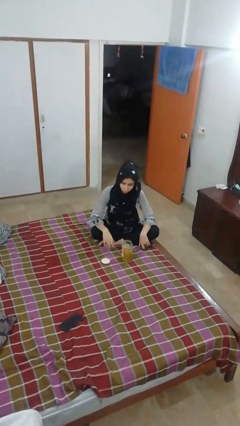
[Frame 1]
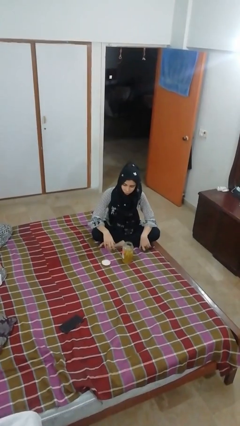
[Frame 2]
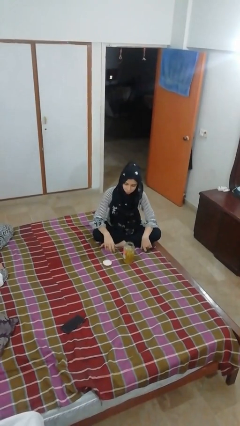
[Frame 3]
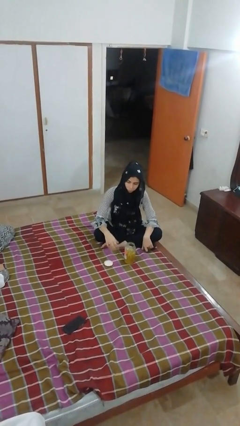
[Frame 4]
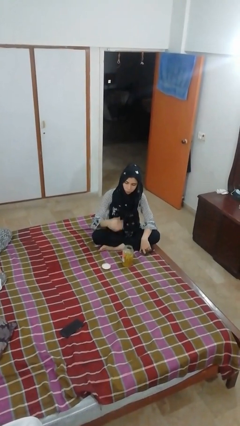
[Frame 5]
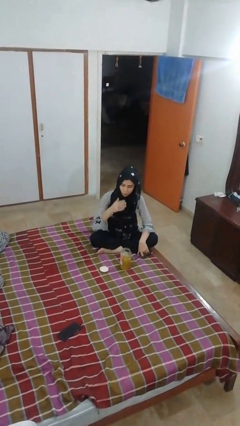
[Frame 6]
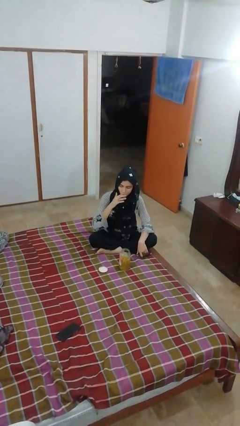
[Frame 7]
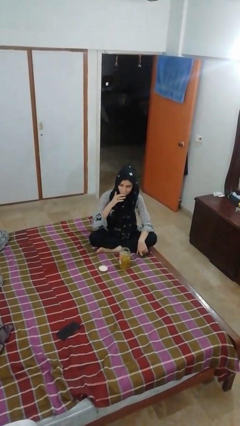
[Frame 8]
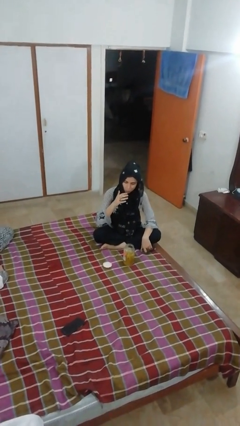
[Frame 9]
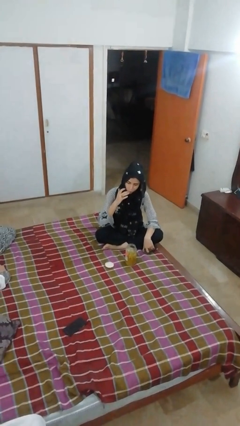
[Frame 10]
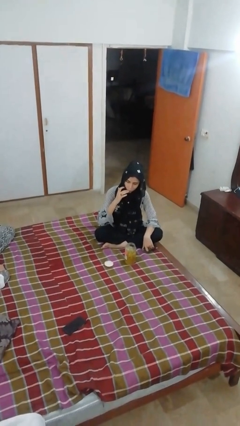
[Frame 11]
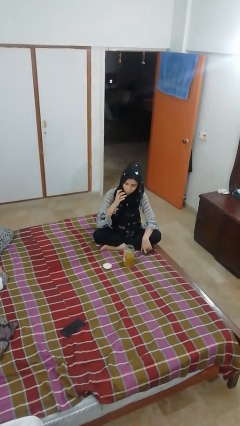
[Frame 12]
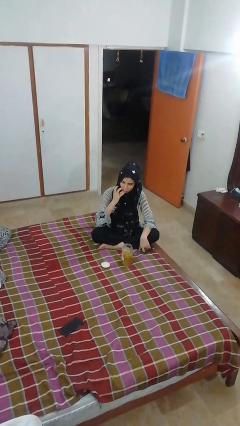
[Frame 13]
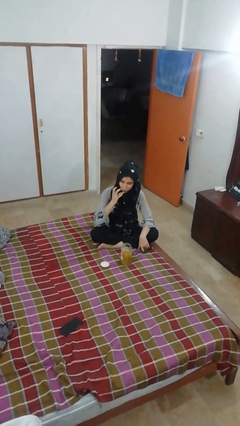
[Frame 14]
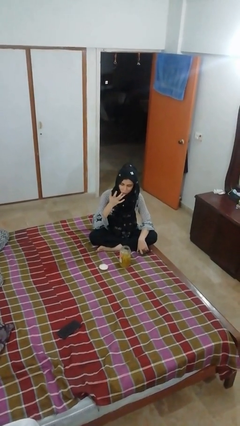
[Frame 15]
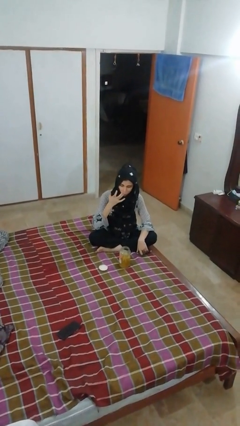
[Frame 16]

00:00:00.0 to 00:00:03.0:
person licks fingers

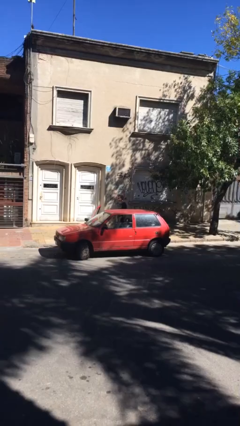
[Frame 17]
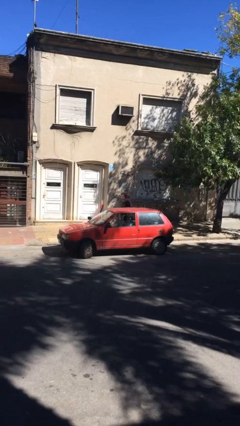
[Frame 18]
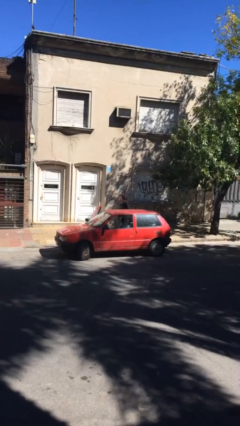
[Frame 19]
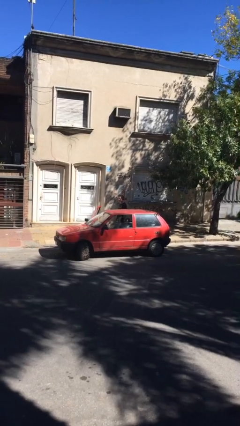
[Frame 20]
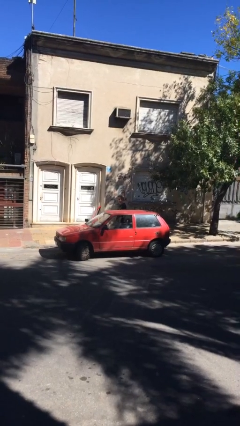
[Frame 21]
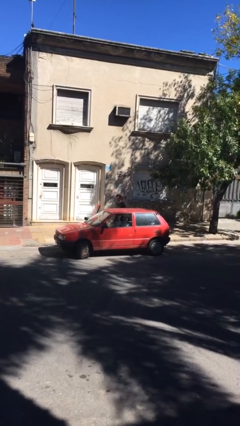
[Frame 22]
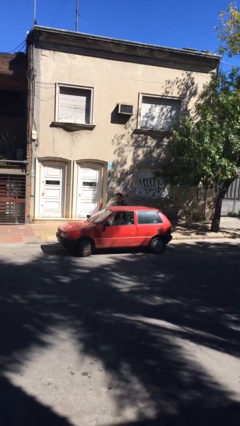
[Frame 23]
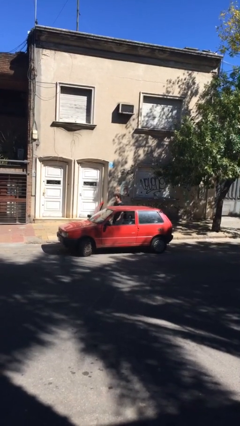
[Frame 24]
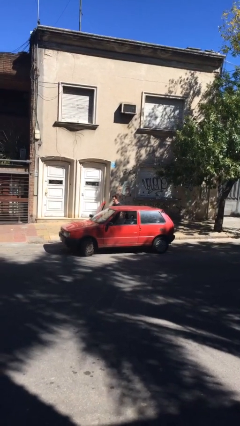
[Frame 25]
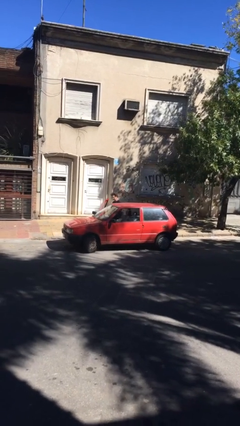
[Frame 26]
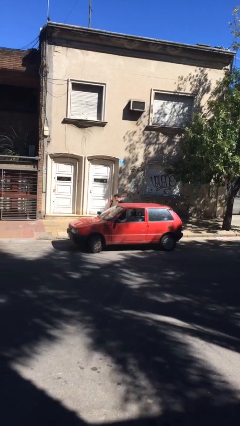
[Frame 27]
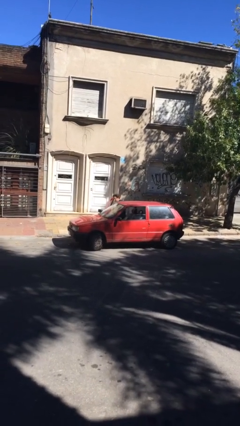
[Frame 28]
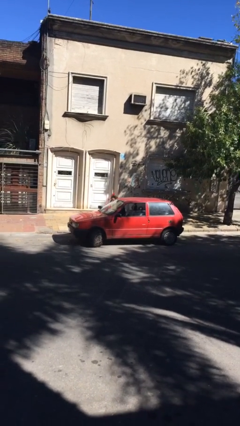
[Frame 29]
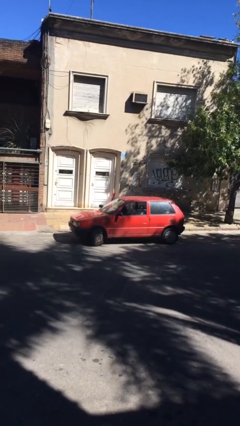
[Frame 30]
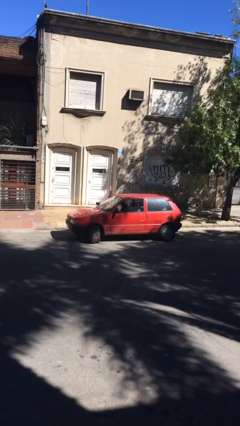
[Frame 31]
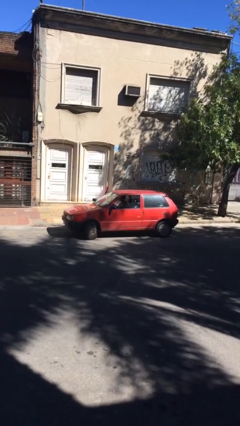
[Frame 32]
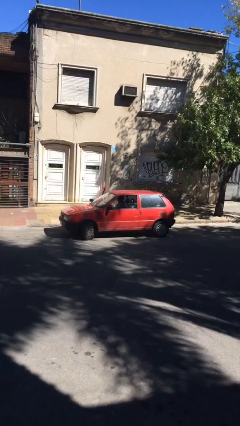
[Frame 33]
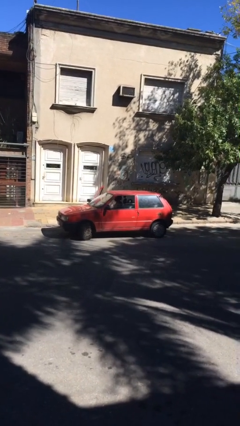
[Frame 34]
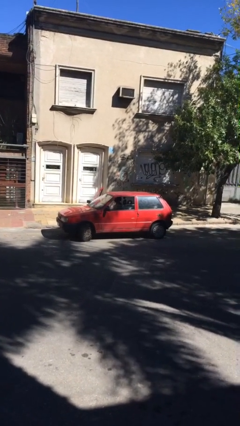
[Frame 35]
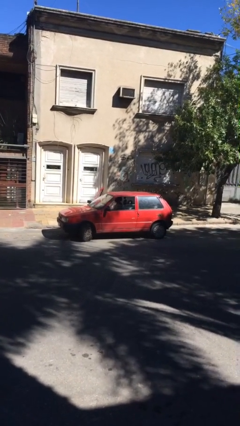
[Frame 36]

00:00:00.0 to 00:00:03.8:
person enters car

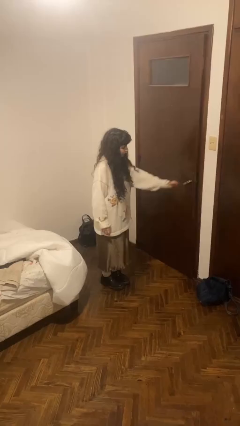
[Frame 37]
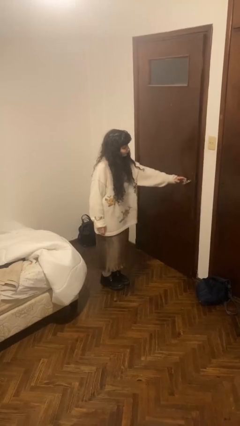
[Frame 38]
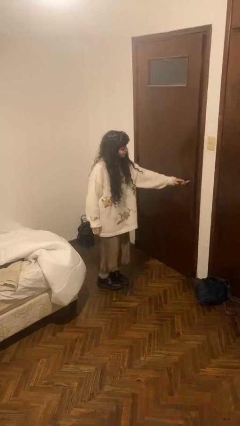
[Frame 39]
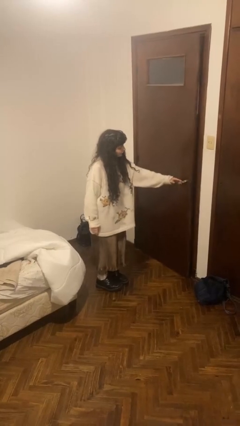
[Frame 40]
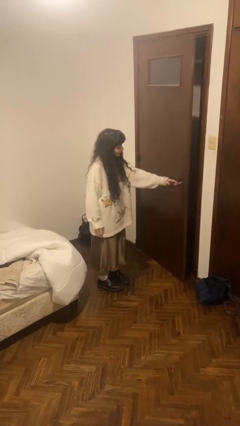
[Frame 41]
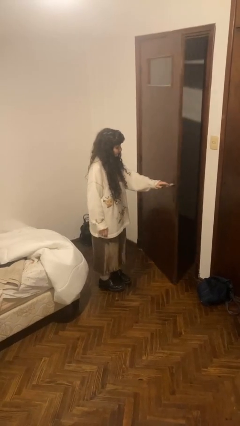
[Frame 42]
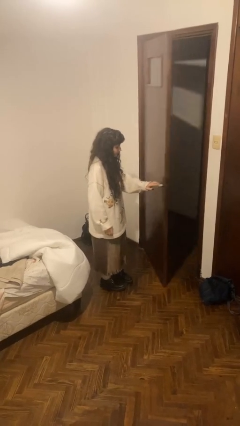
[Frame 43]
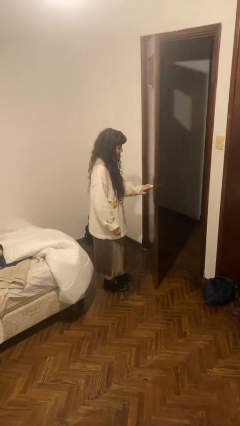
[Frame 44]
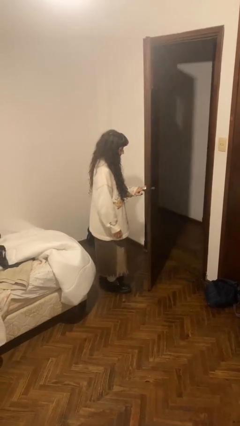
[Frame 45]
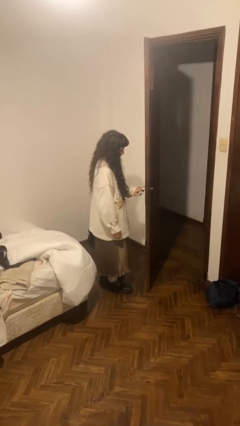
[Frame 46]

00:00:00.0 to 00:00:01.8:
person opens facility door

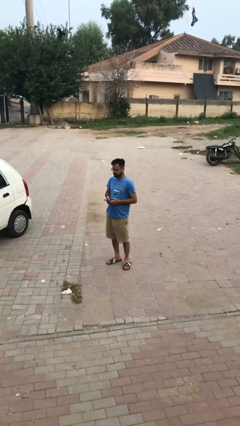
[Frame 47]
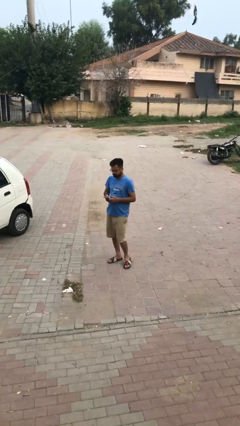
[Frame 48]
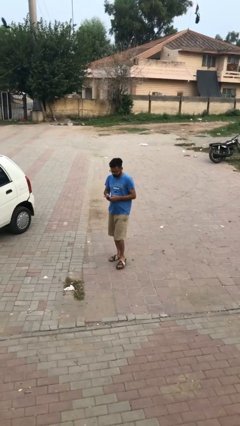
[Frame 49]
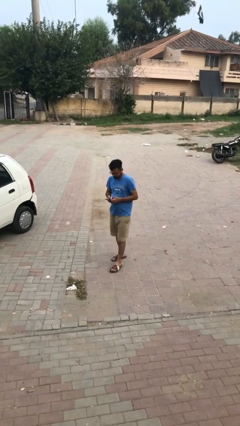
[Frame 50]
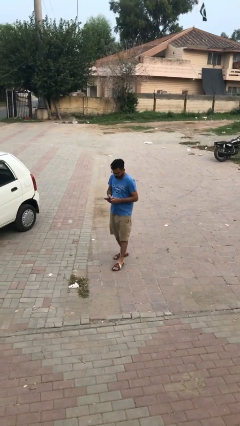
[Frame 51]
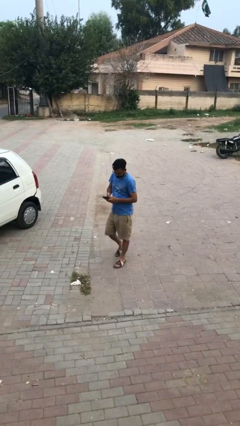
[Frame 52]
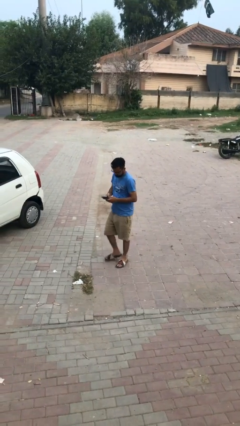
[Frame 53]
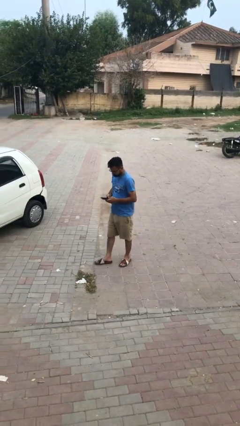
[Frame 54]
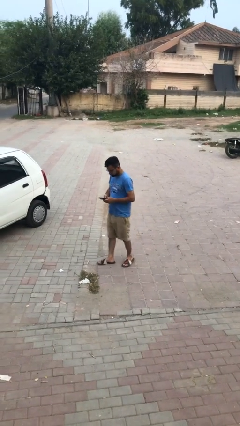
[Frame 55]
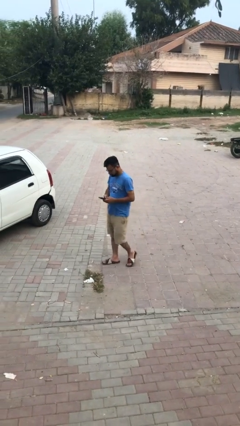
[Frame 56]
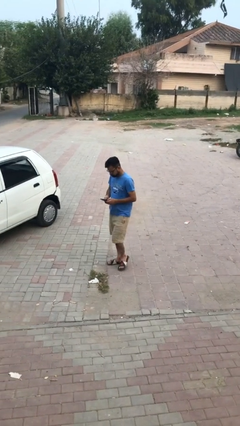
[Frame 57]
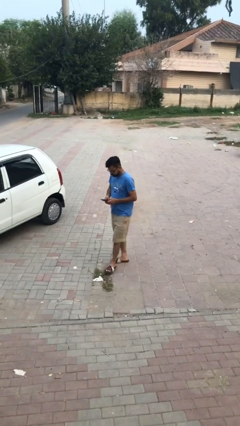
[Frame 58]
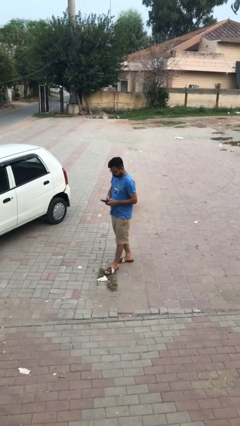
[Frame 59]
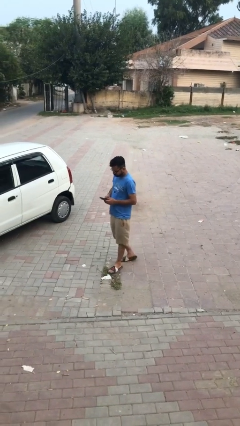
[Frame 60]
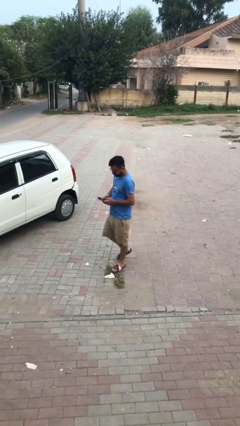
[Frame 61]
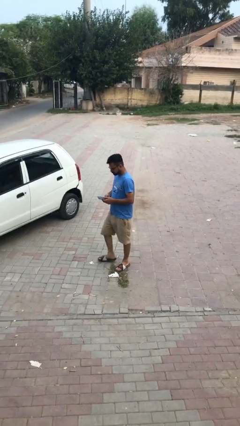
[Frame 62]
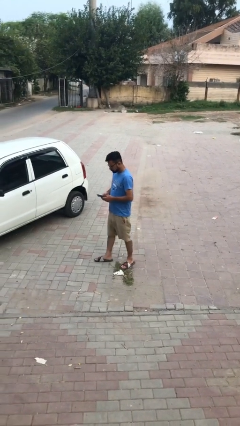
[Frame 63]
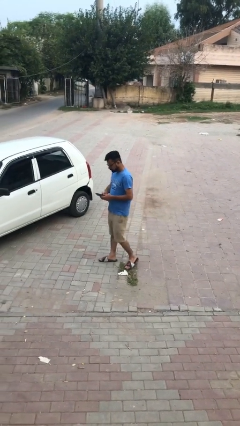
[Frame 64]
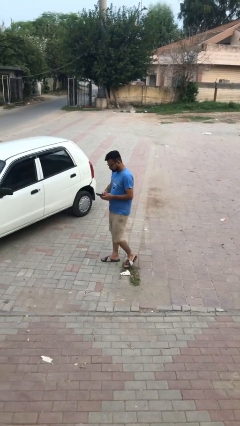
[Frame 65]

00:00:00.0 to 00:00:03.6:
person texts on phone

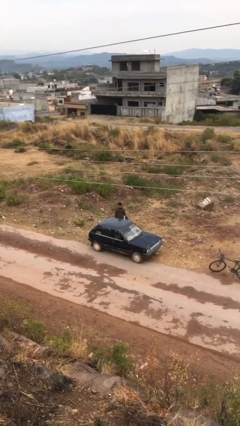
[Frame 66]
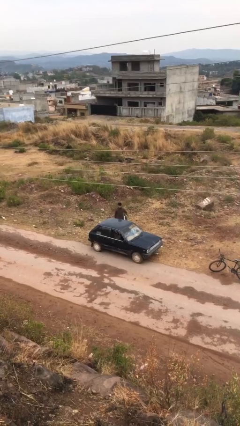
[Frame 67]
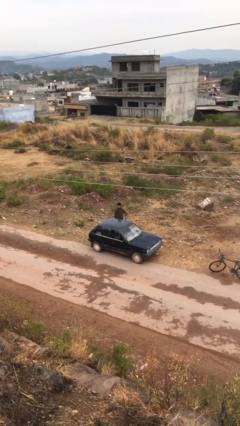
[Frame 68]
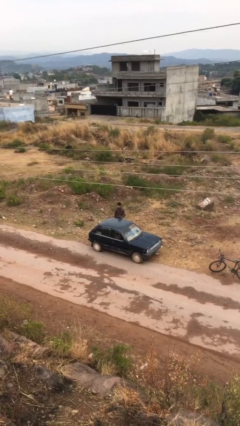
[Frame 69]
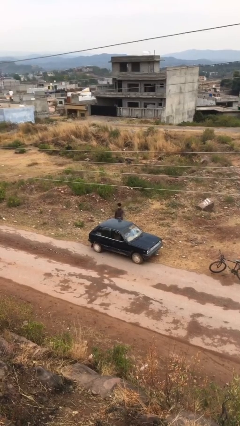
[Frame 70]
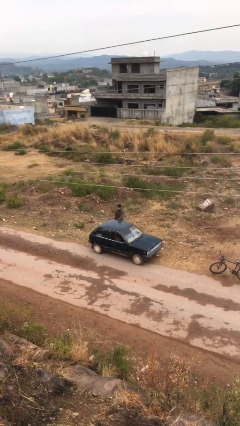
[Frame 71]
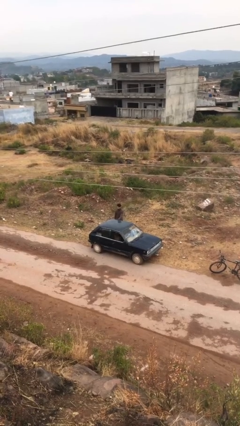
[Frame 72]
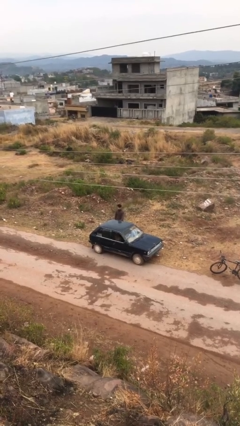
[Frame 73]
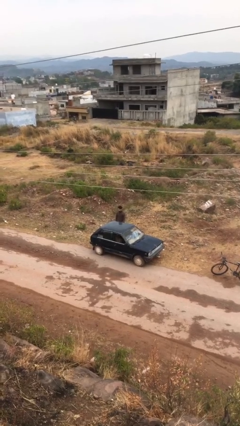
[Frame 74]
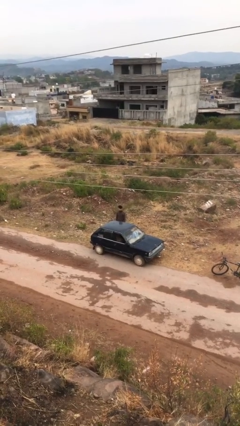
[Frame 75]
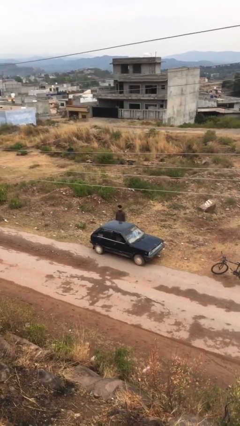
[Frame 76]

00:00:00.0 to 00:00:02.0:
person closes car door

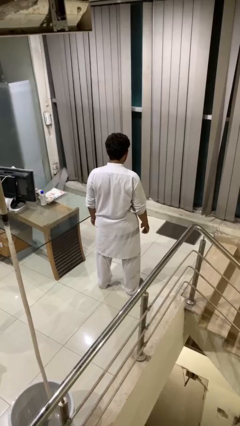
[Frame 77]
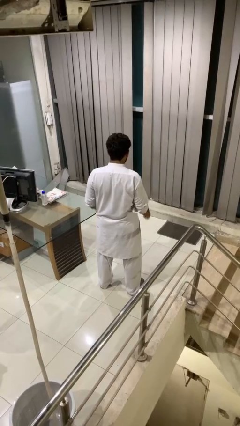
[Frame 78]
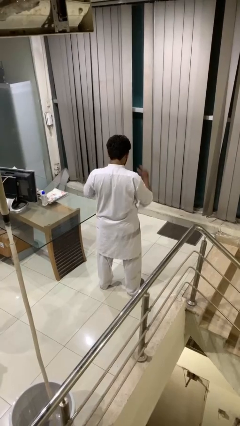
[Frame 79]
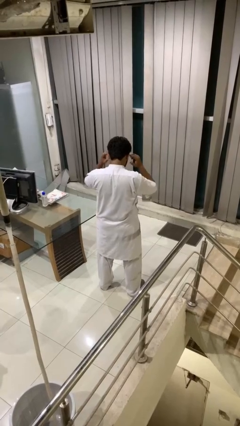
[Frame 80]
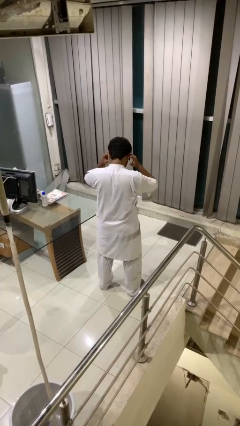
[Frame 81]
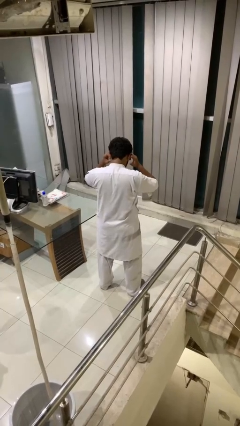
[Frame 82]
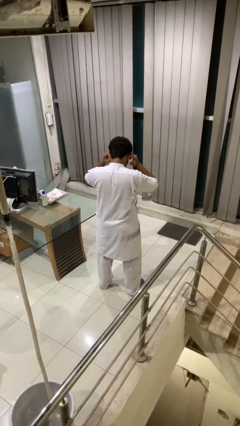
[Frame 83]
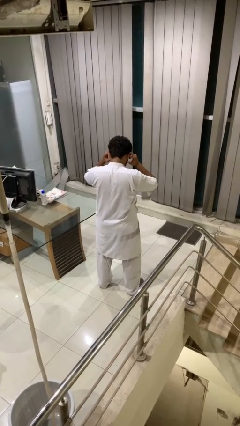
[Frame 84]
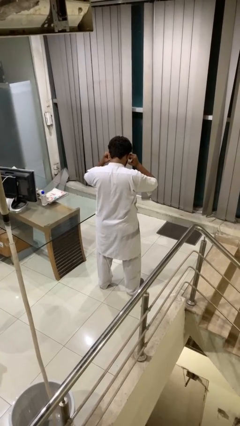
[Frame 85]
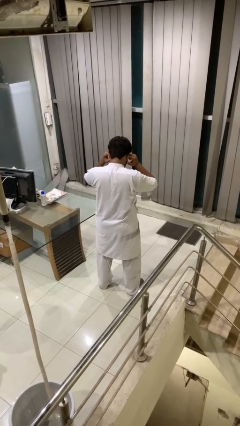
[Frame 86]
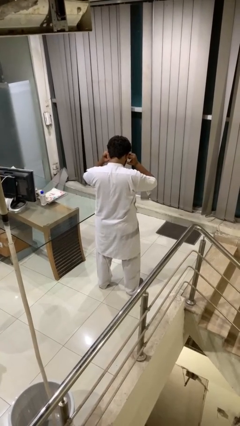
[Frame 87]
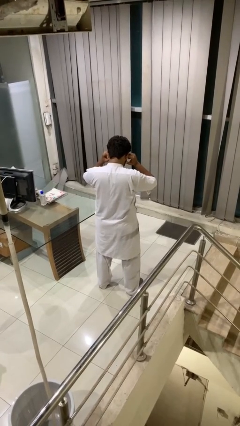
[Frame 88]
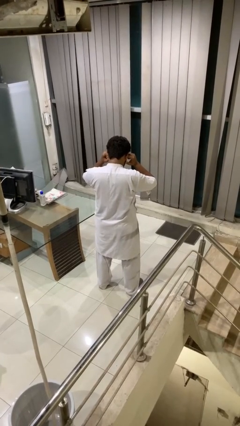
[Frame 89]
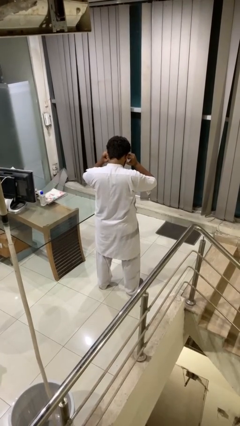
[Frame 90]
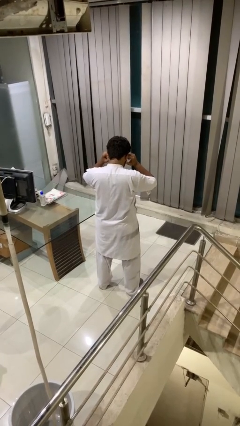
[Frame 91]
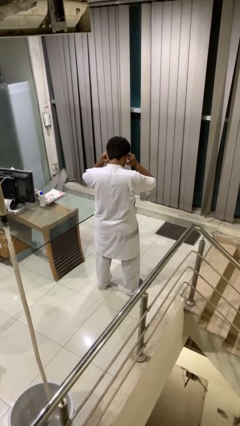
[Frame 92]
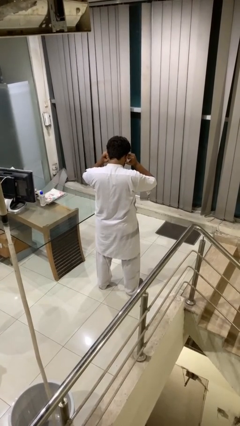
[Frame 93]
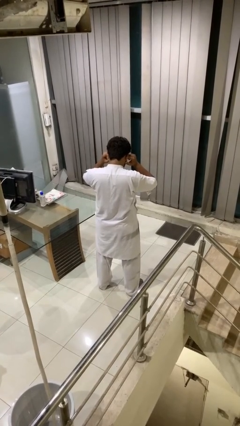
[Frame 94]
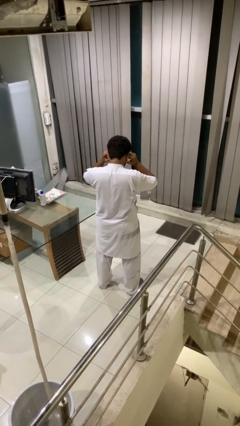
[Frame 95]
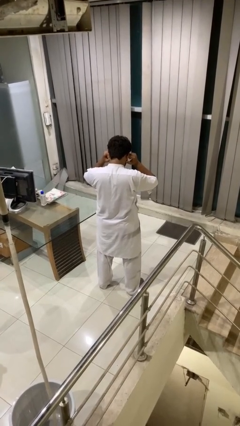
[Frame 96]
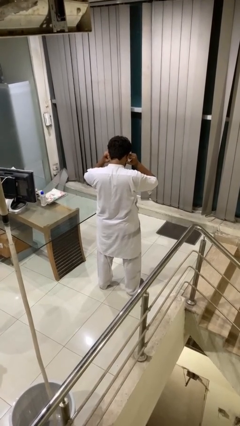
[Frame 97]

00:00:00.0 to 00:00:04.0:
person puts fingers in ear
